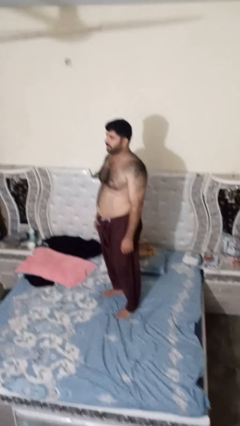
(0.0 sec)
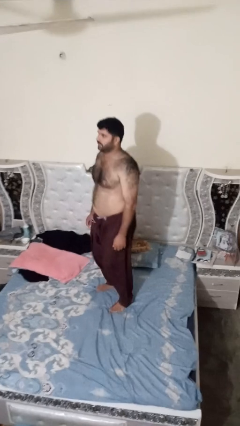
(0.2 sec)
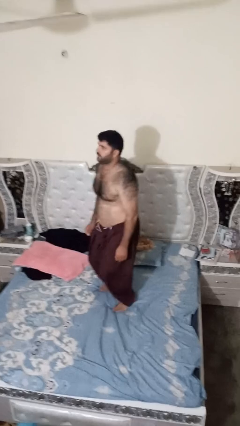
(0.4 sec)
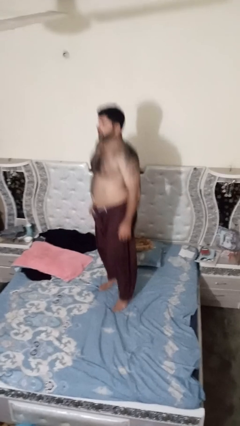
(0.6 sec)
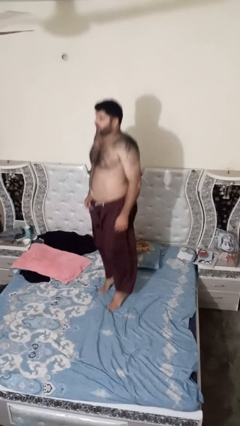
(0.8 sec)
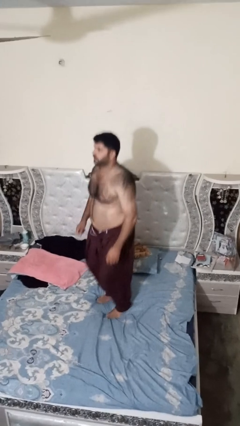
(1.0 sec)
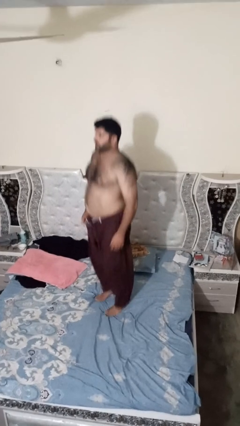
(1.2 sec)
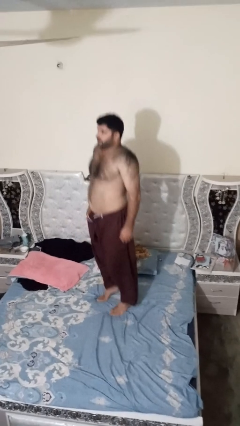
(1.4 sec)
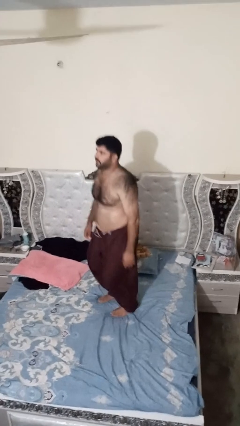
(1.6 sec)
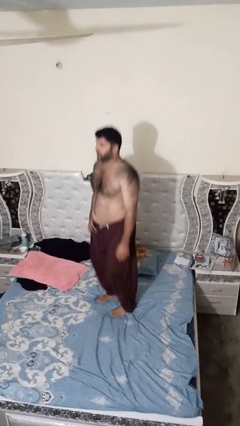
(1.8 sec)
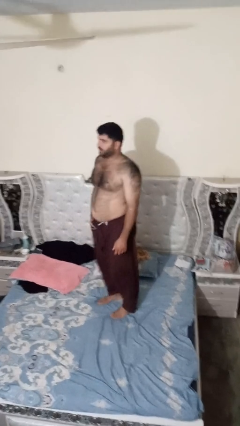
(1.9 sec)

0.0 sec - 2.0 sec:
person jumps on bed

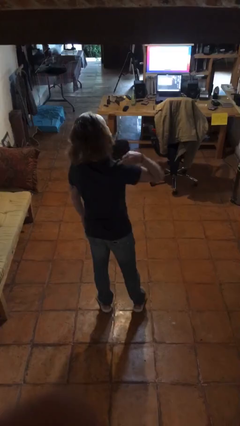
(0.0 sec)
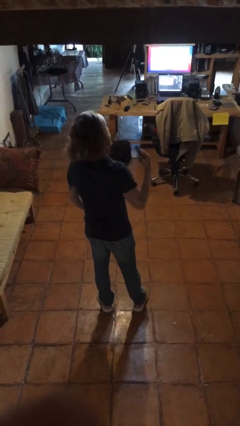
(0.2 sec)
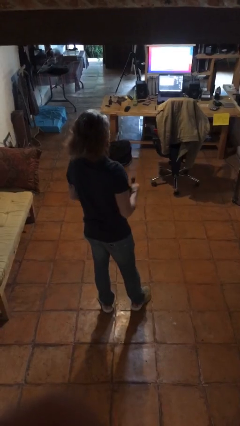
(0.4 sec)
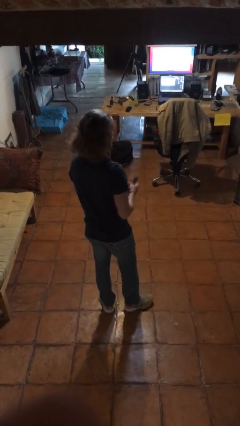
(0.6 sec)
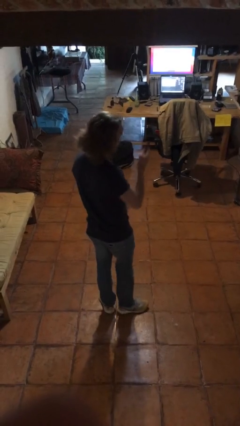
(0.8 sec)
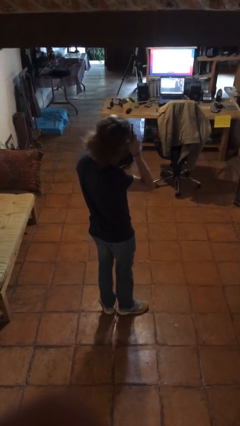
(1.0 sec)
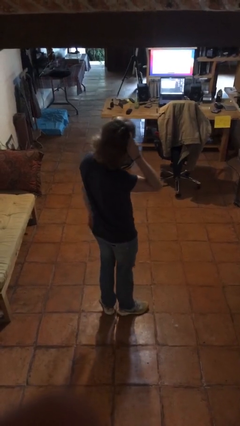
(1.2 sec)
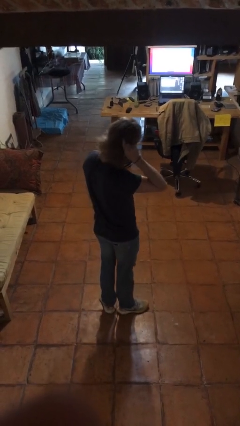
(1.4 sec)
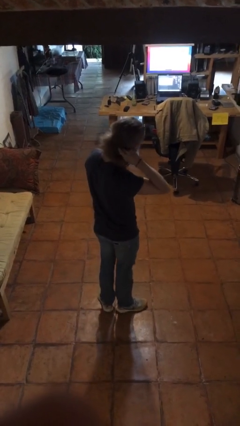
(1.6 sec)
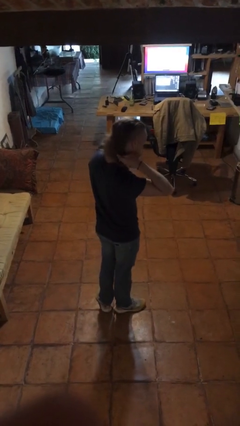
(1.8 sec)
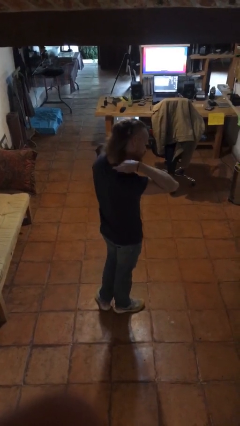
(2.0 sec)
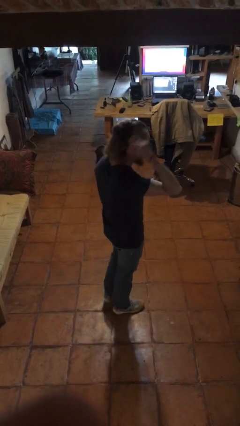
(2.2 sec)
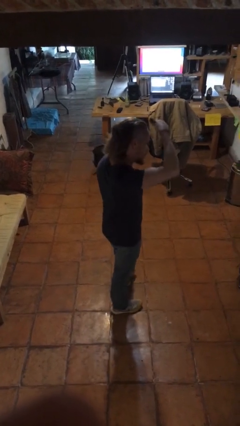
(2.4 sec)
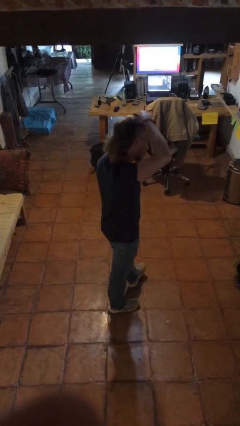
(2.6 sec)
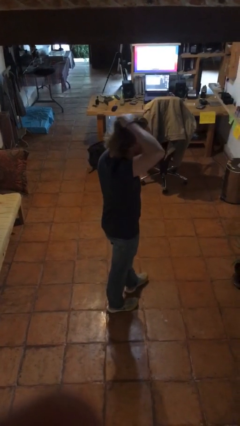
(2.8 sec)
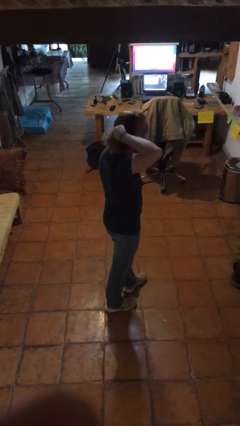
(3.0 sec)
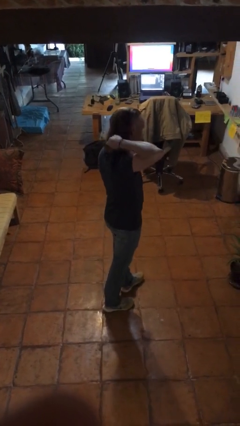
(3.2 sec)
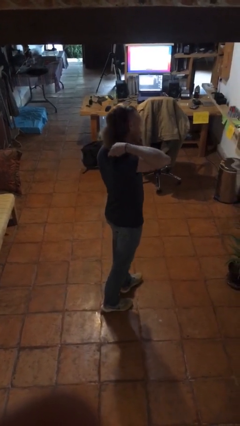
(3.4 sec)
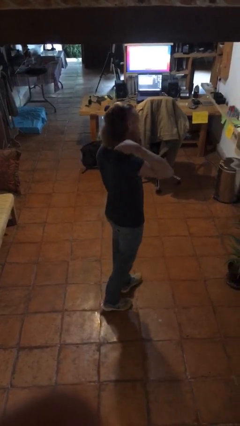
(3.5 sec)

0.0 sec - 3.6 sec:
person brushes hair

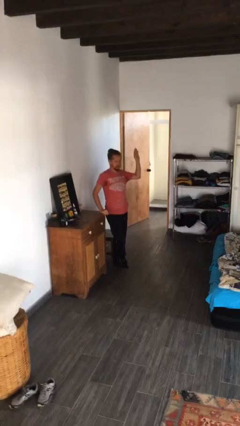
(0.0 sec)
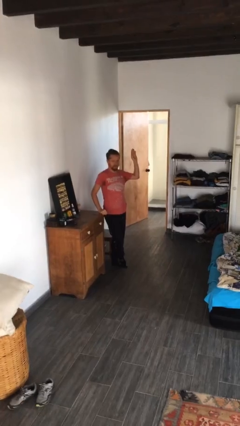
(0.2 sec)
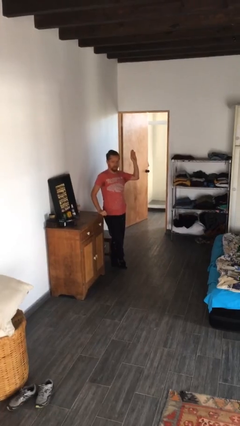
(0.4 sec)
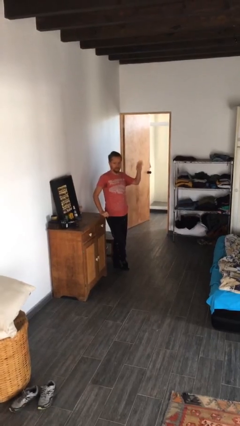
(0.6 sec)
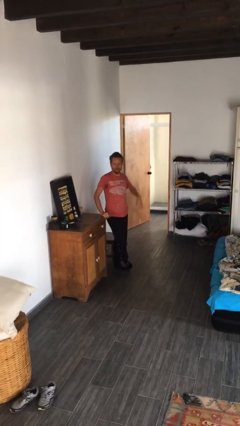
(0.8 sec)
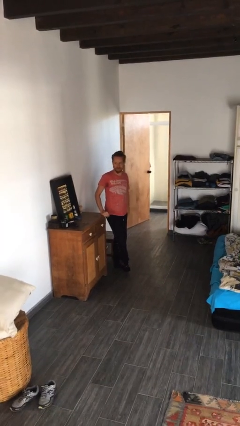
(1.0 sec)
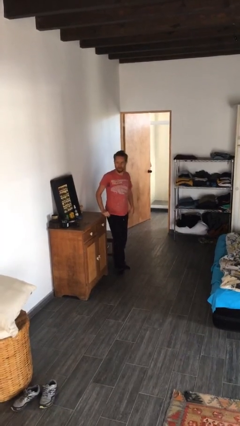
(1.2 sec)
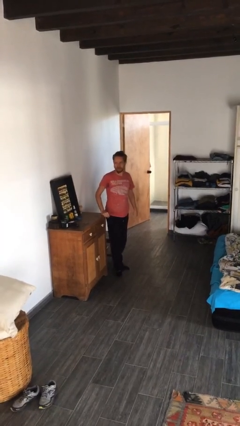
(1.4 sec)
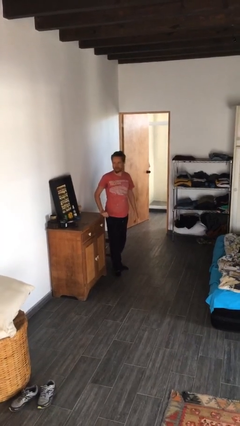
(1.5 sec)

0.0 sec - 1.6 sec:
person gestures lower hand

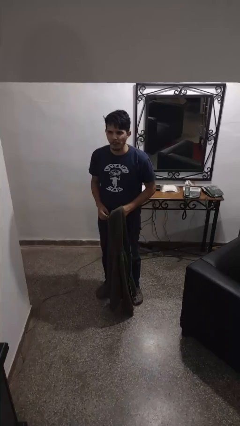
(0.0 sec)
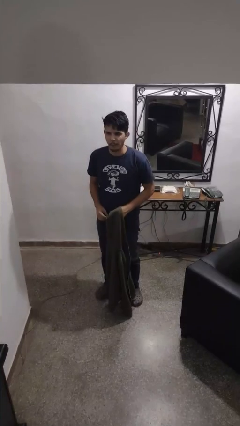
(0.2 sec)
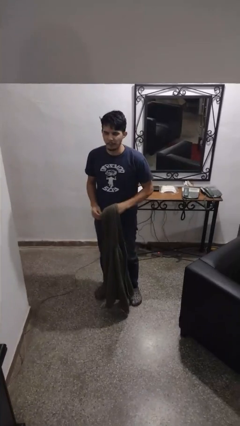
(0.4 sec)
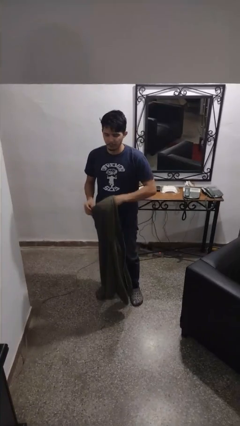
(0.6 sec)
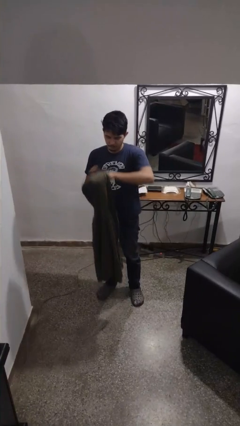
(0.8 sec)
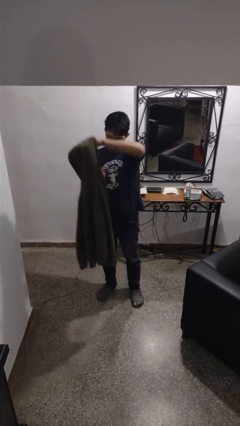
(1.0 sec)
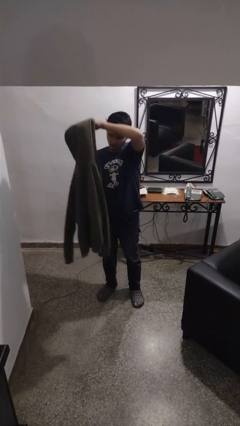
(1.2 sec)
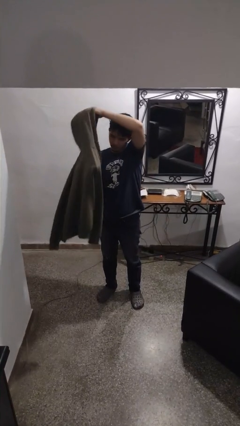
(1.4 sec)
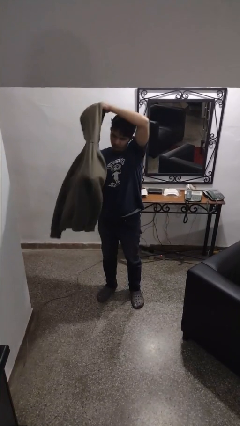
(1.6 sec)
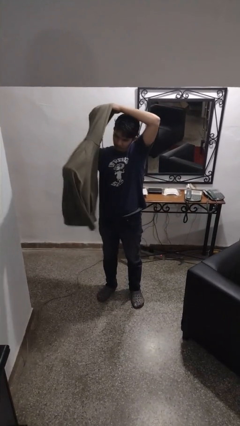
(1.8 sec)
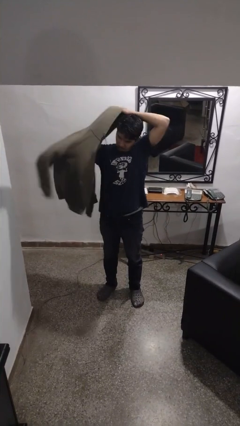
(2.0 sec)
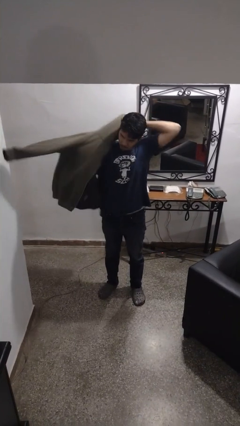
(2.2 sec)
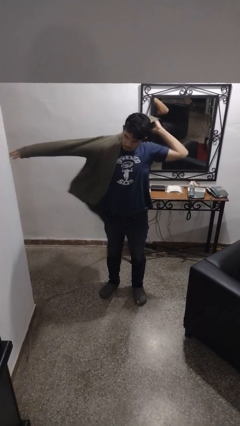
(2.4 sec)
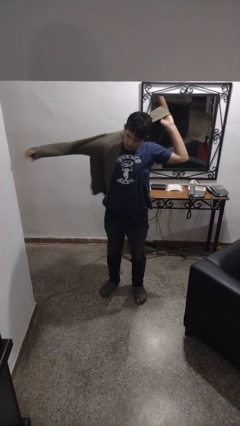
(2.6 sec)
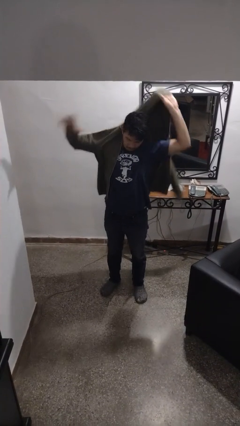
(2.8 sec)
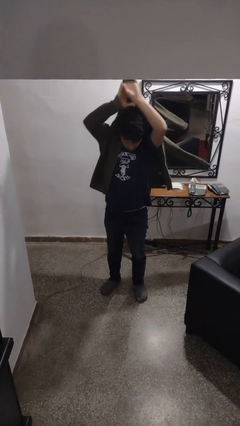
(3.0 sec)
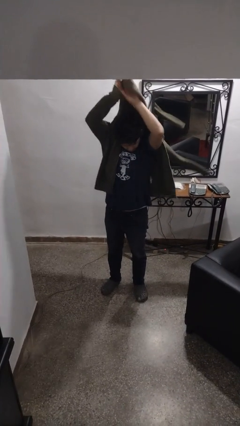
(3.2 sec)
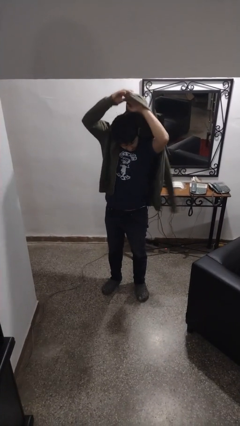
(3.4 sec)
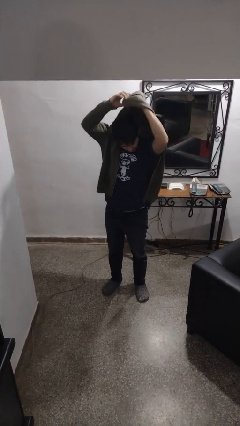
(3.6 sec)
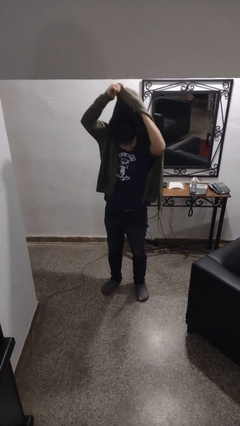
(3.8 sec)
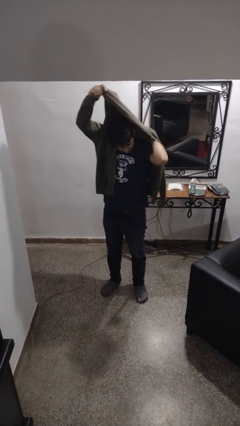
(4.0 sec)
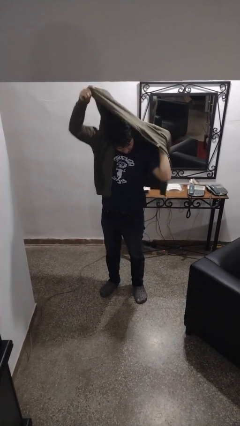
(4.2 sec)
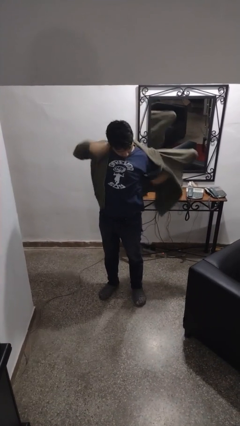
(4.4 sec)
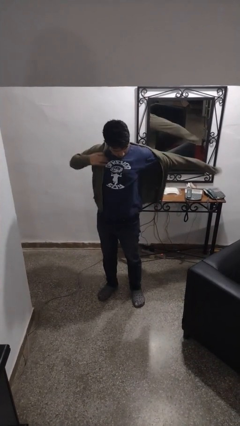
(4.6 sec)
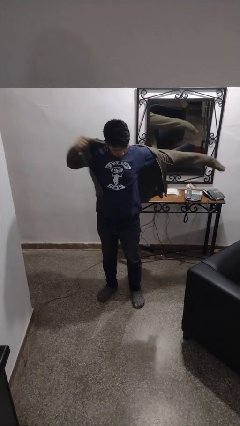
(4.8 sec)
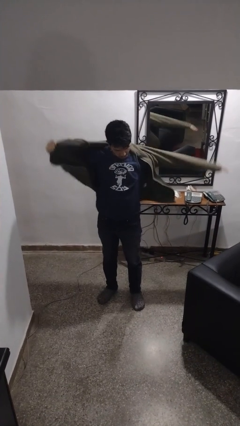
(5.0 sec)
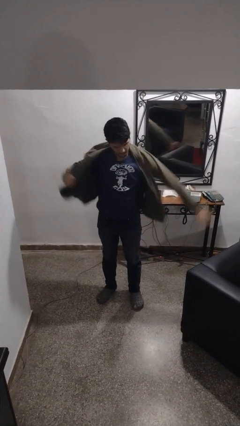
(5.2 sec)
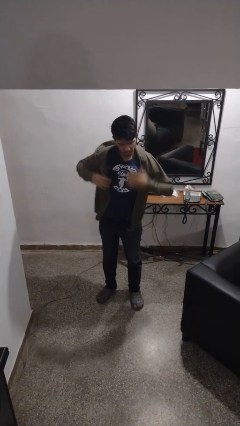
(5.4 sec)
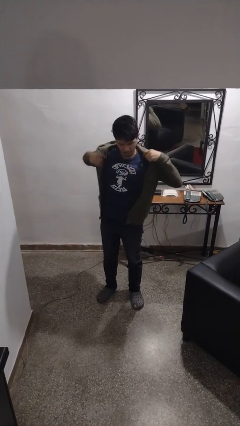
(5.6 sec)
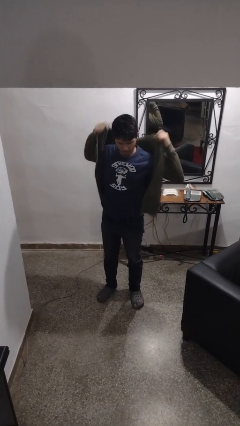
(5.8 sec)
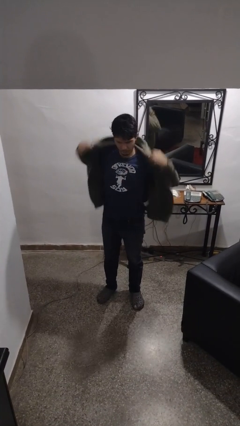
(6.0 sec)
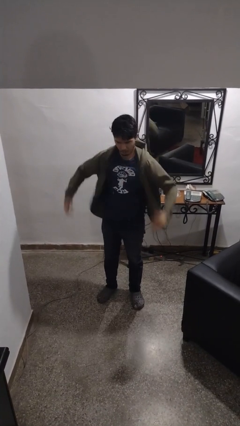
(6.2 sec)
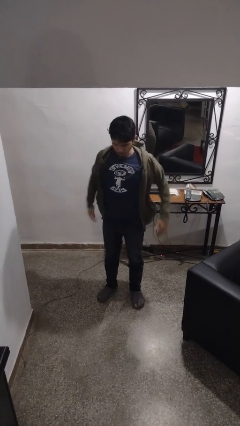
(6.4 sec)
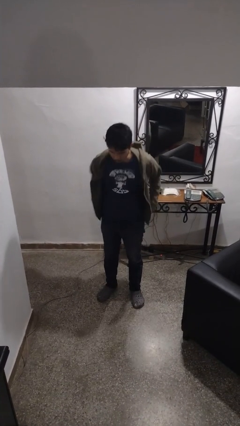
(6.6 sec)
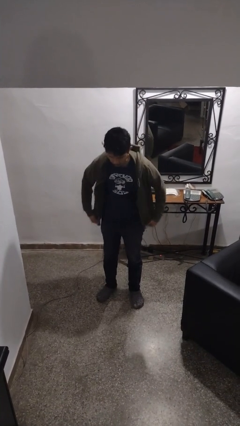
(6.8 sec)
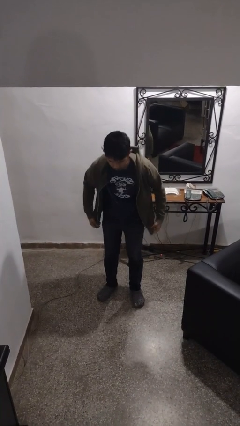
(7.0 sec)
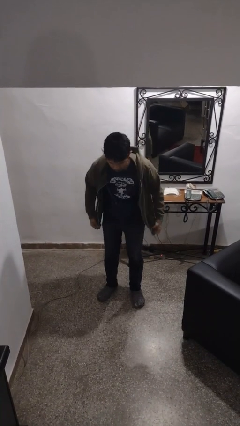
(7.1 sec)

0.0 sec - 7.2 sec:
person puts on jacket

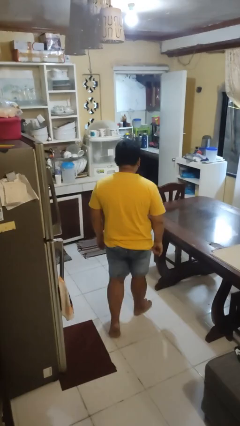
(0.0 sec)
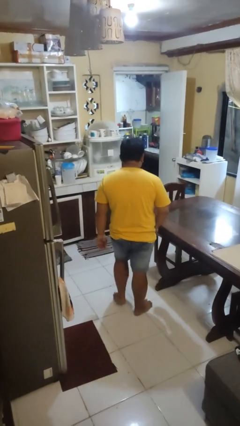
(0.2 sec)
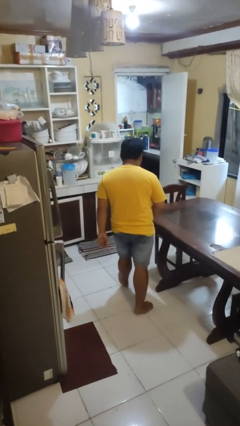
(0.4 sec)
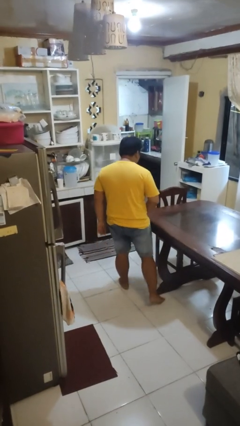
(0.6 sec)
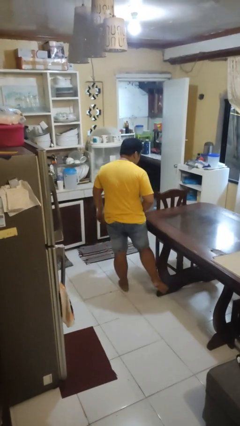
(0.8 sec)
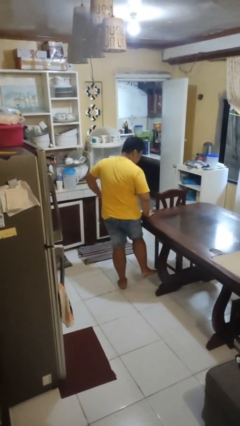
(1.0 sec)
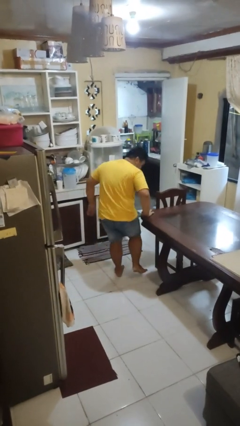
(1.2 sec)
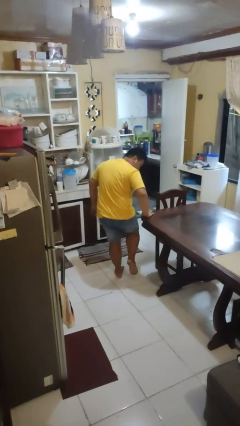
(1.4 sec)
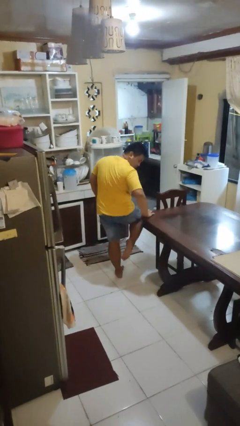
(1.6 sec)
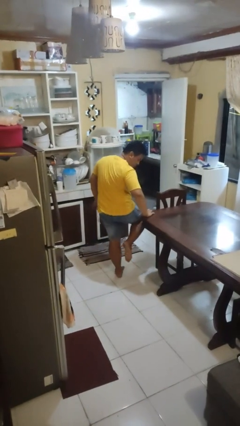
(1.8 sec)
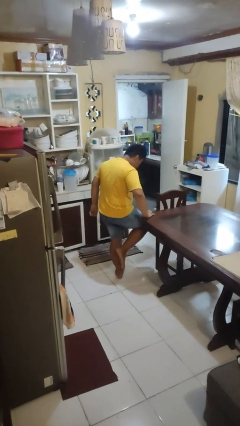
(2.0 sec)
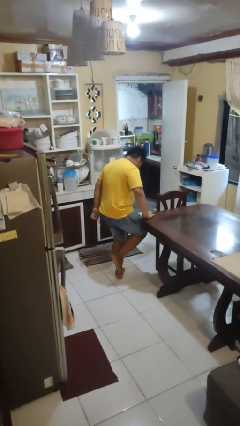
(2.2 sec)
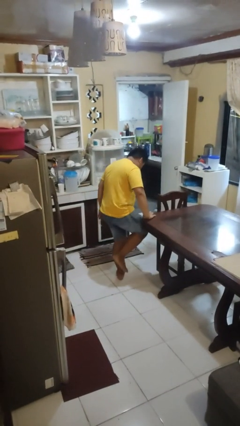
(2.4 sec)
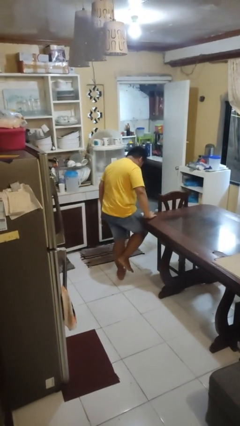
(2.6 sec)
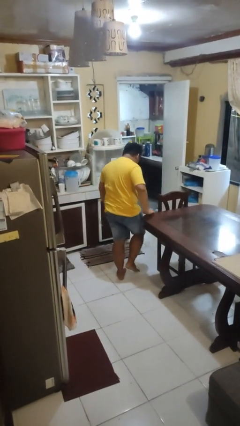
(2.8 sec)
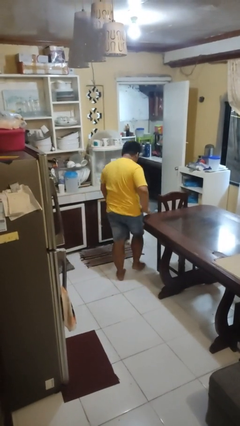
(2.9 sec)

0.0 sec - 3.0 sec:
person bumps into table
